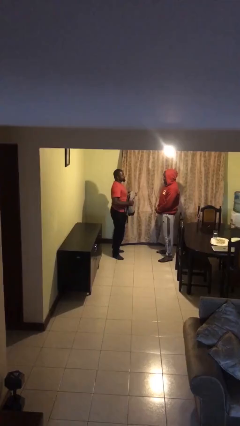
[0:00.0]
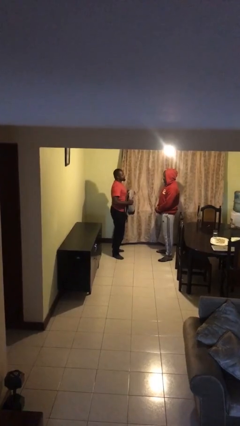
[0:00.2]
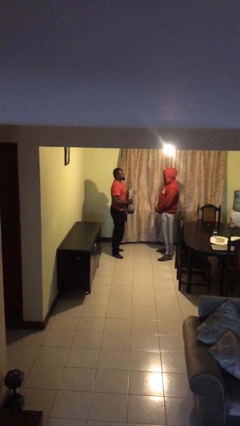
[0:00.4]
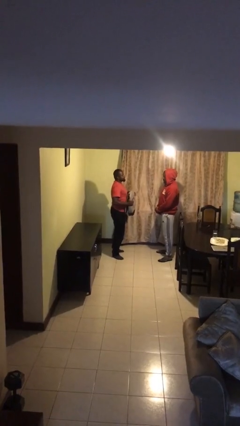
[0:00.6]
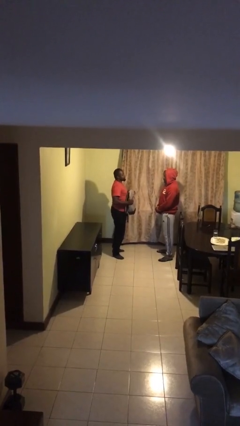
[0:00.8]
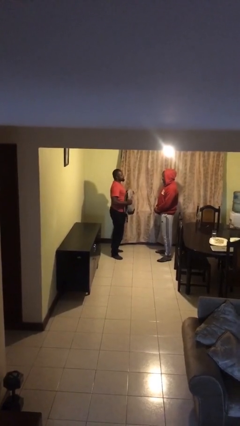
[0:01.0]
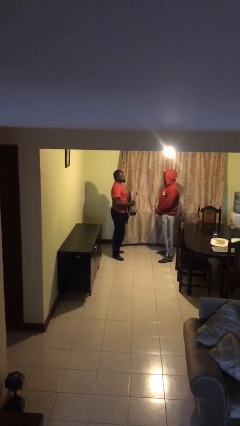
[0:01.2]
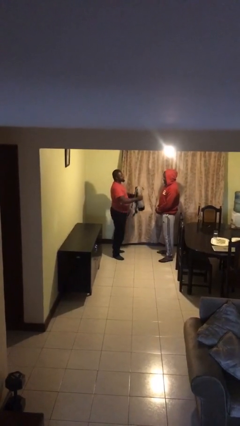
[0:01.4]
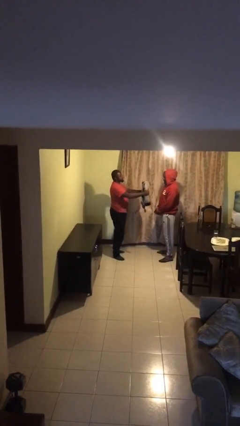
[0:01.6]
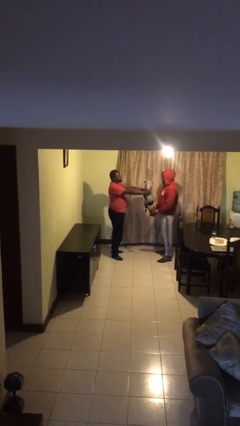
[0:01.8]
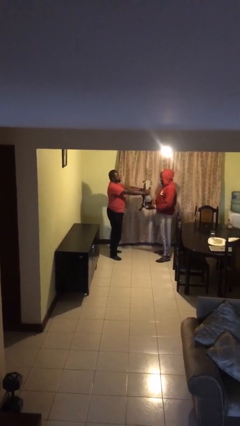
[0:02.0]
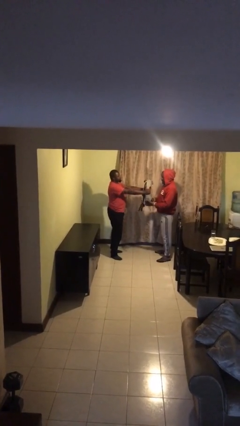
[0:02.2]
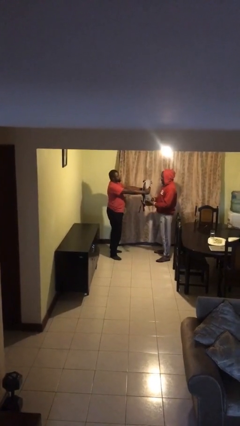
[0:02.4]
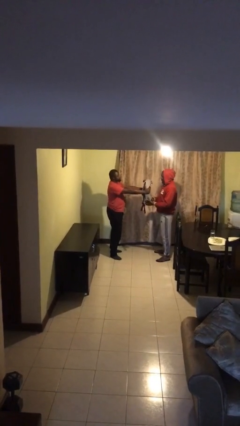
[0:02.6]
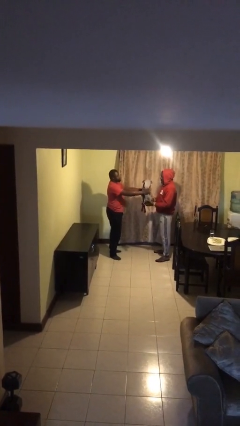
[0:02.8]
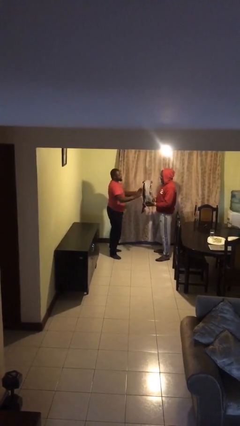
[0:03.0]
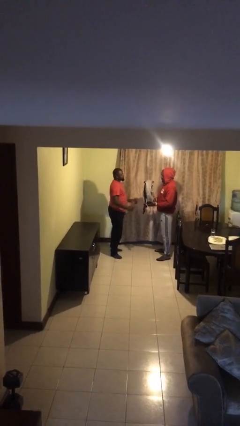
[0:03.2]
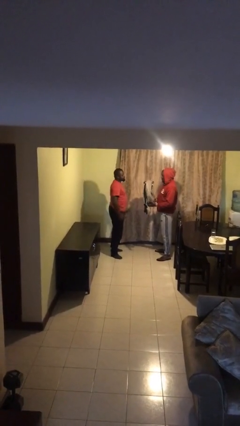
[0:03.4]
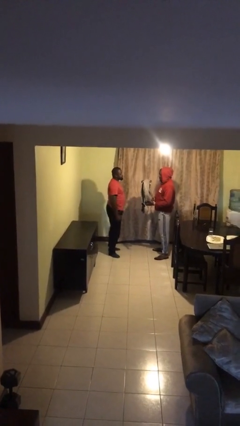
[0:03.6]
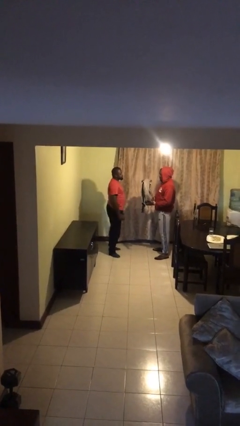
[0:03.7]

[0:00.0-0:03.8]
person transfers object to person

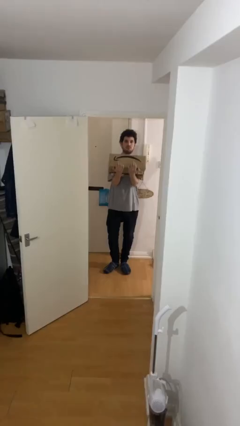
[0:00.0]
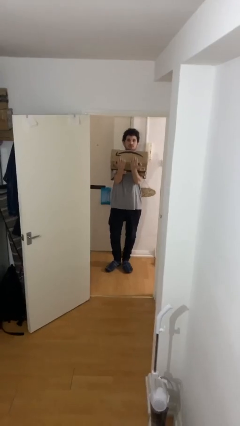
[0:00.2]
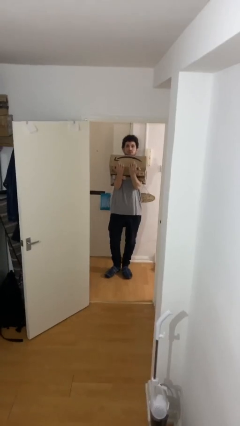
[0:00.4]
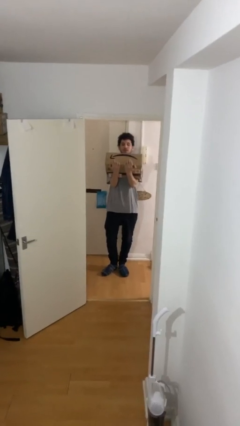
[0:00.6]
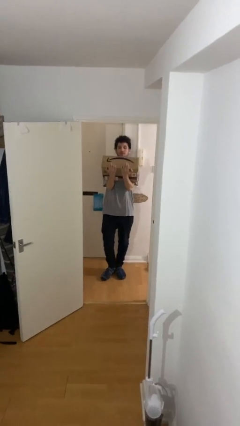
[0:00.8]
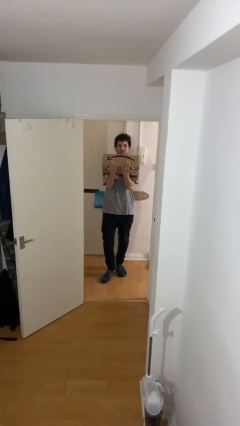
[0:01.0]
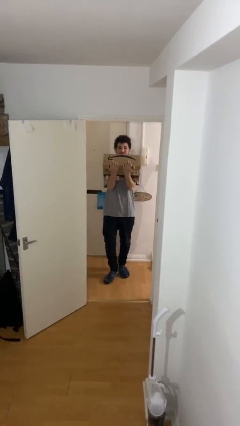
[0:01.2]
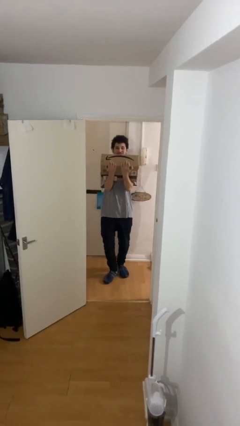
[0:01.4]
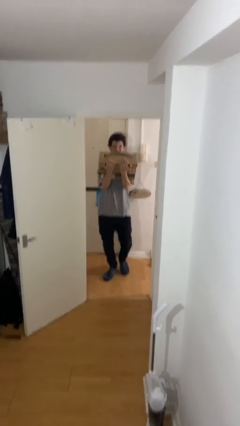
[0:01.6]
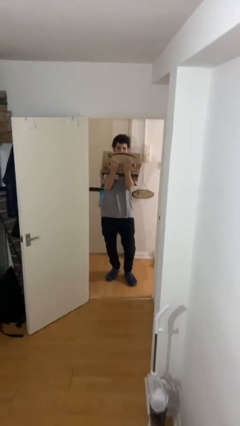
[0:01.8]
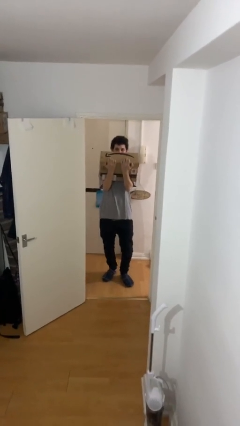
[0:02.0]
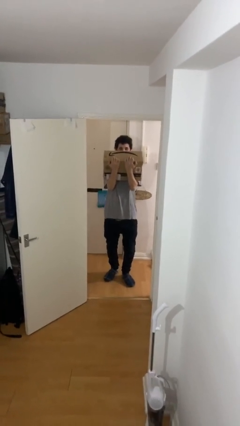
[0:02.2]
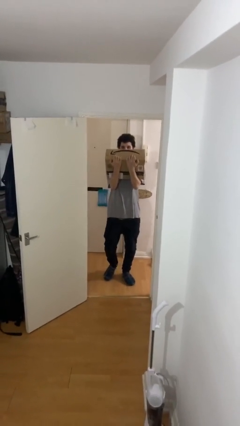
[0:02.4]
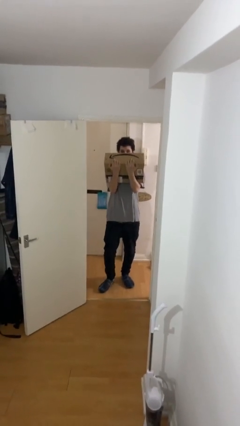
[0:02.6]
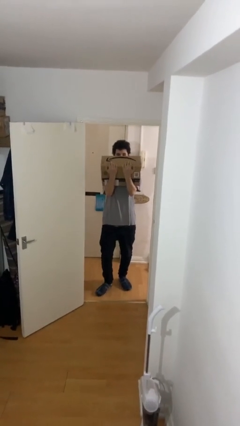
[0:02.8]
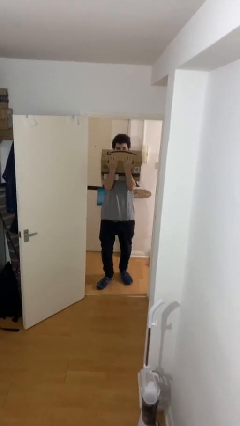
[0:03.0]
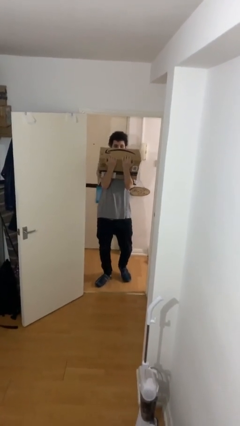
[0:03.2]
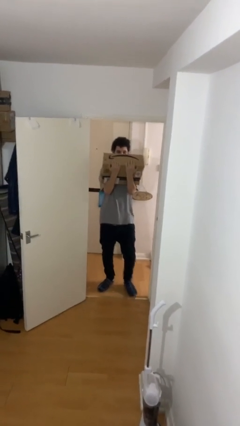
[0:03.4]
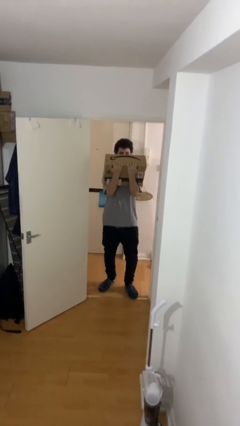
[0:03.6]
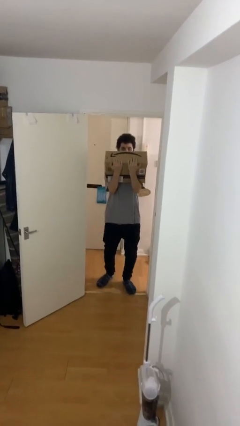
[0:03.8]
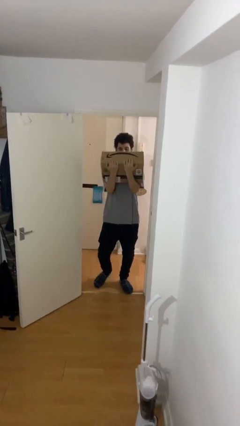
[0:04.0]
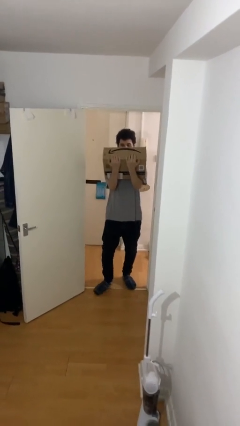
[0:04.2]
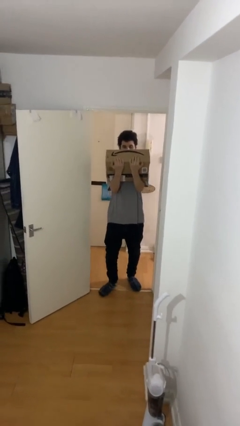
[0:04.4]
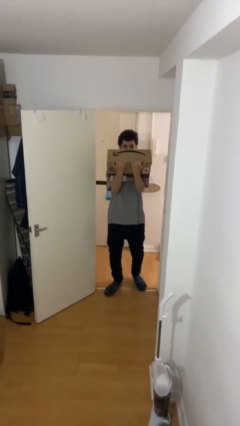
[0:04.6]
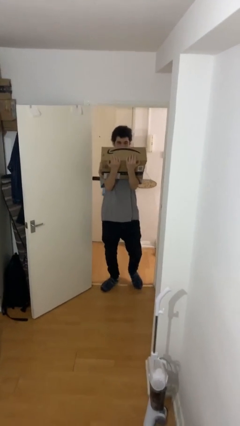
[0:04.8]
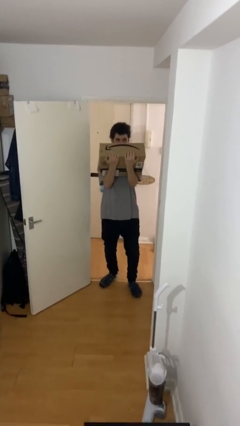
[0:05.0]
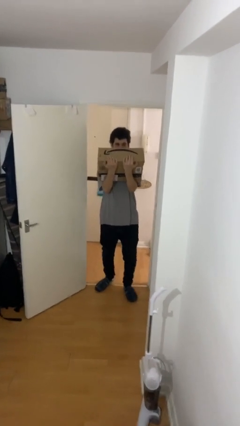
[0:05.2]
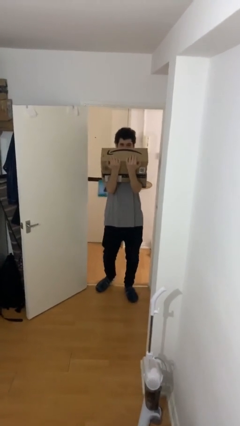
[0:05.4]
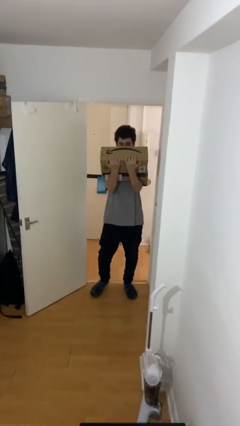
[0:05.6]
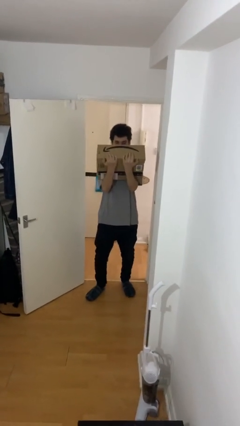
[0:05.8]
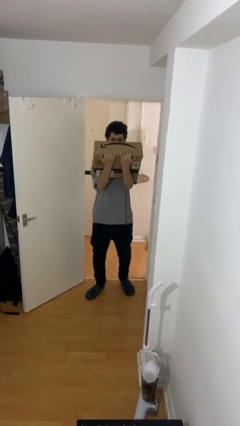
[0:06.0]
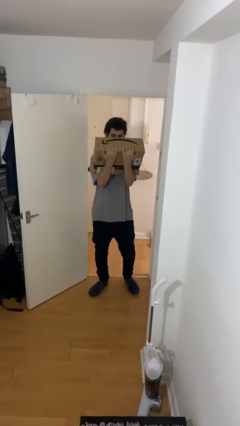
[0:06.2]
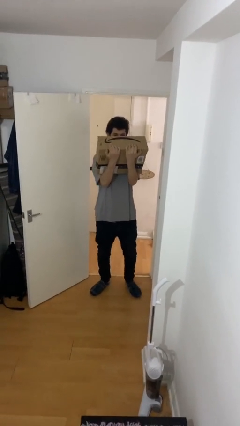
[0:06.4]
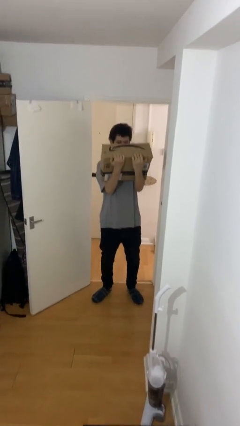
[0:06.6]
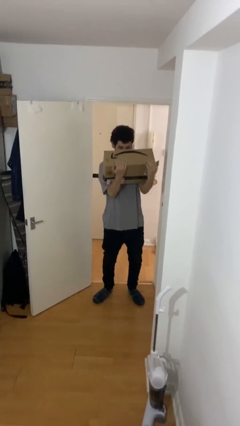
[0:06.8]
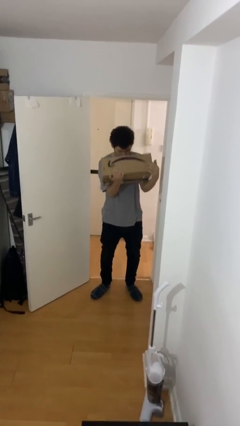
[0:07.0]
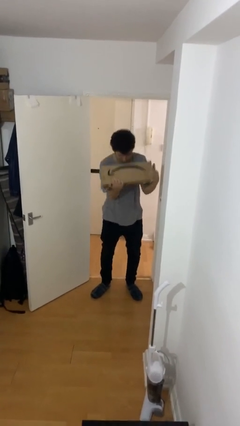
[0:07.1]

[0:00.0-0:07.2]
person carries heavy object

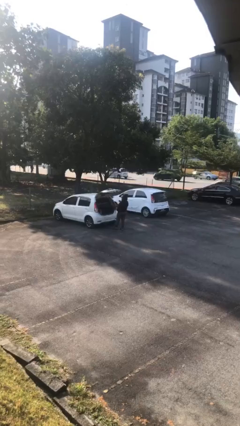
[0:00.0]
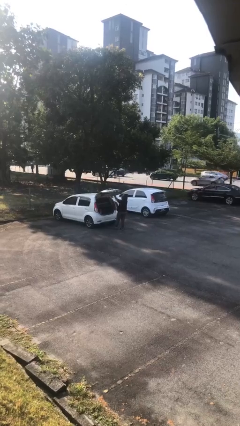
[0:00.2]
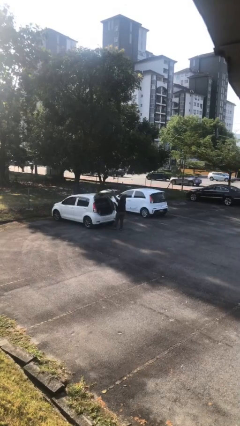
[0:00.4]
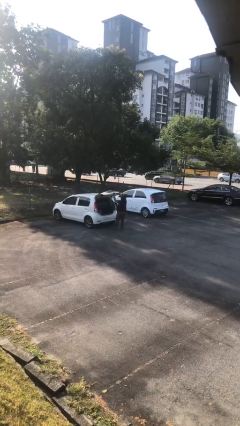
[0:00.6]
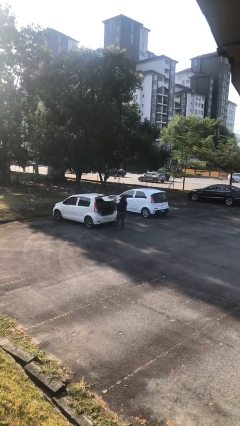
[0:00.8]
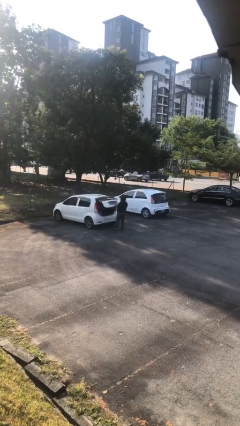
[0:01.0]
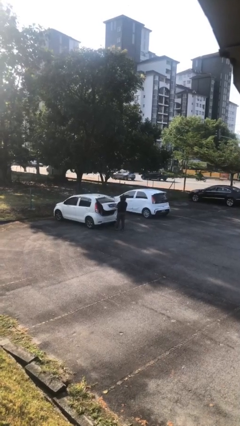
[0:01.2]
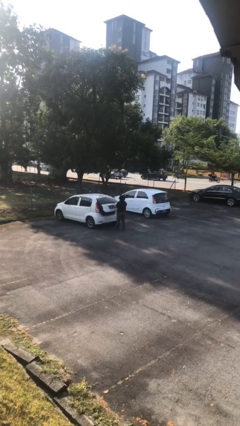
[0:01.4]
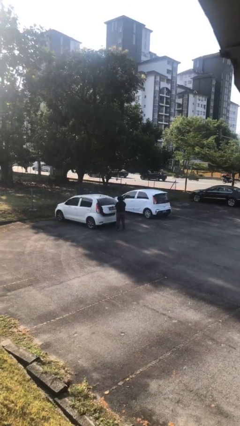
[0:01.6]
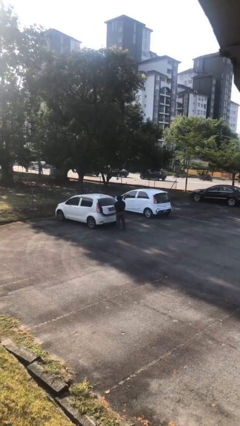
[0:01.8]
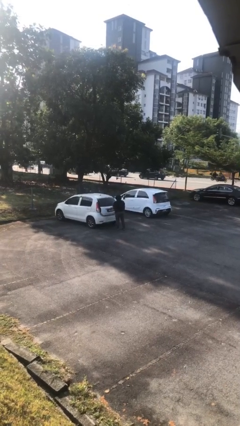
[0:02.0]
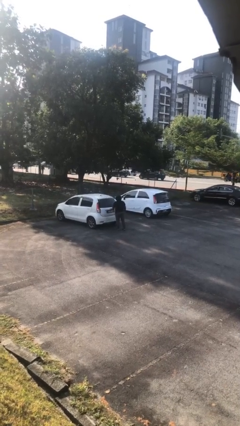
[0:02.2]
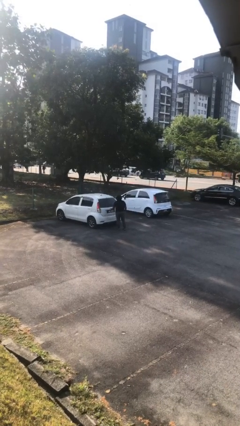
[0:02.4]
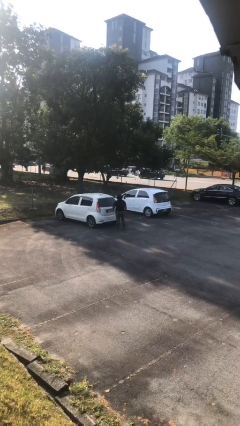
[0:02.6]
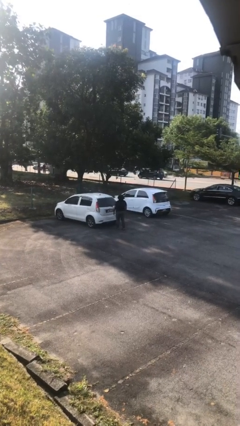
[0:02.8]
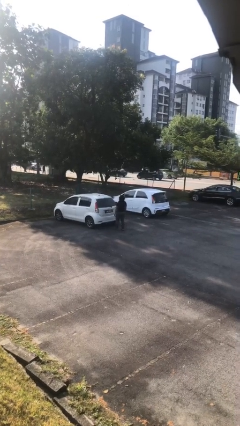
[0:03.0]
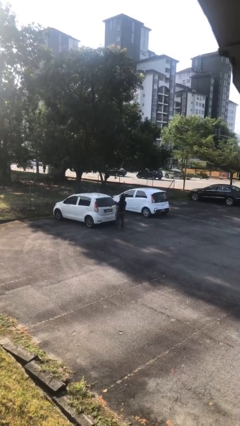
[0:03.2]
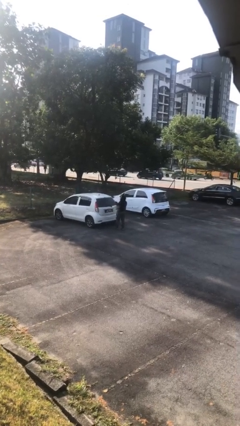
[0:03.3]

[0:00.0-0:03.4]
person closes car trunk

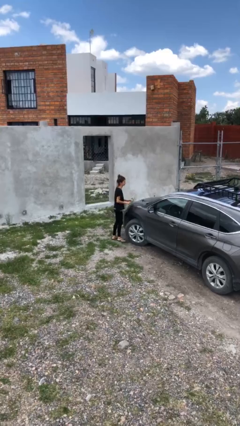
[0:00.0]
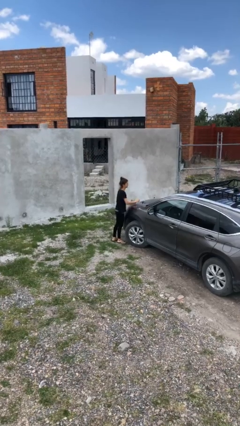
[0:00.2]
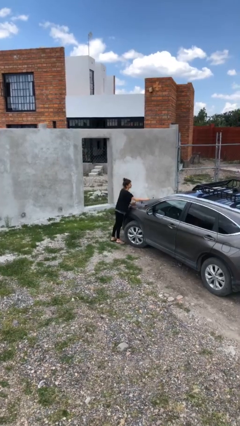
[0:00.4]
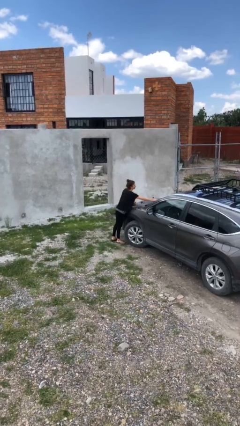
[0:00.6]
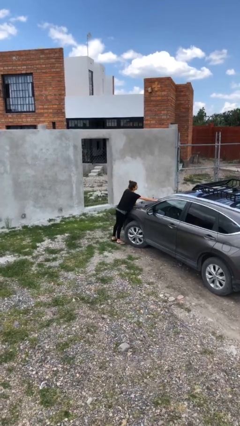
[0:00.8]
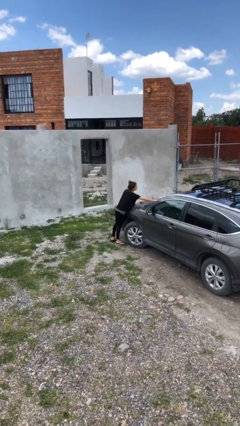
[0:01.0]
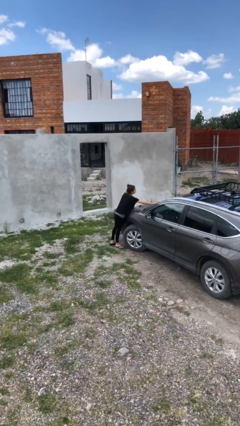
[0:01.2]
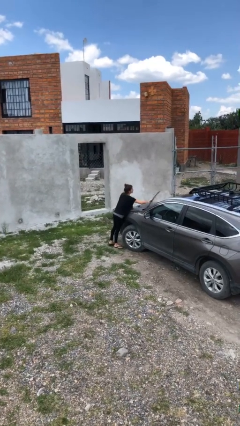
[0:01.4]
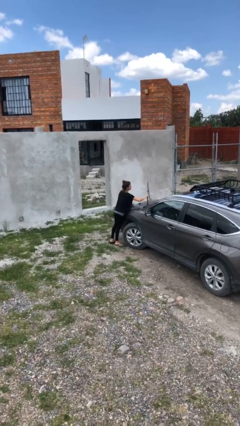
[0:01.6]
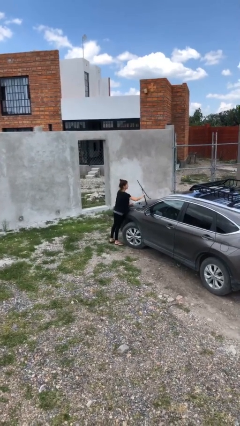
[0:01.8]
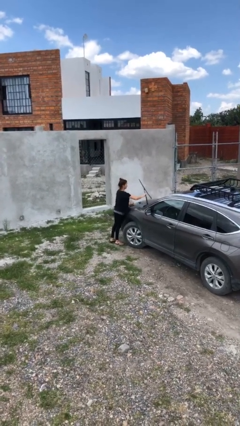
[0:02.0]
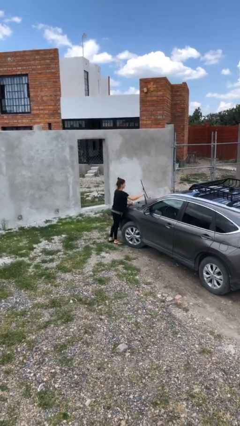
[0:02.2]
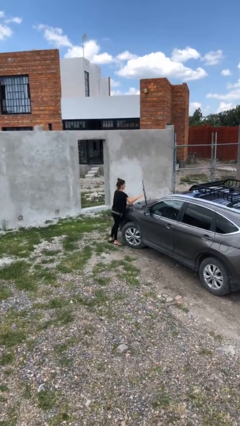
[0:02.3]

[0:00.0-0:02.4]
person flips up car wipers

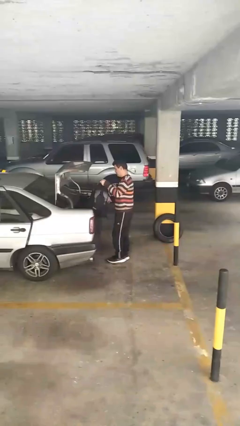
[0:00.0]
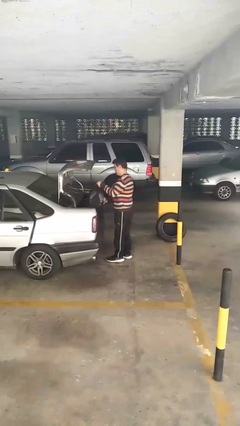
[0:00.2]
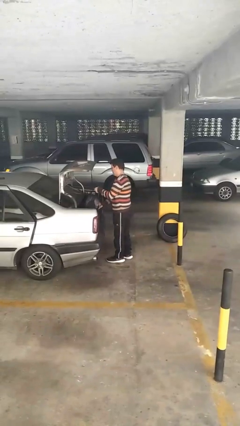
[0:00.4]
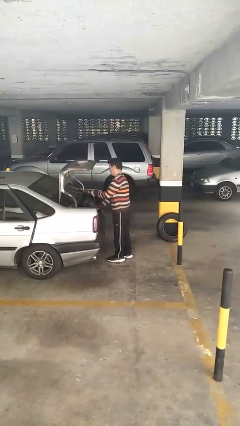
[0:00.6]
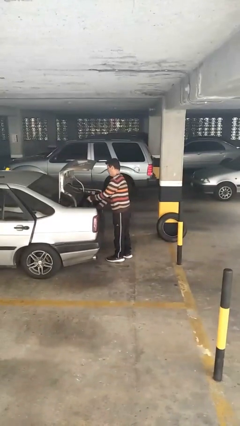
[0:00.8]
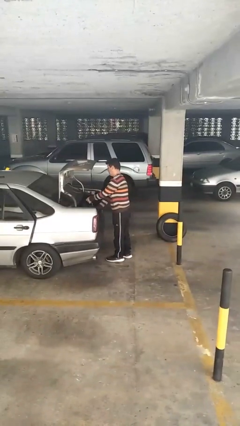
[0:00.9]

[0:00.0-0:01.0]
person loads car

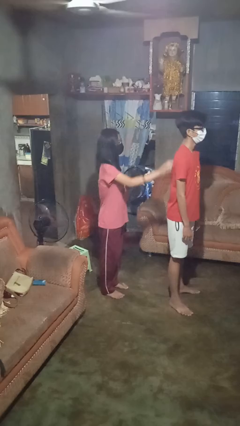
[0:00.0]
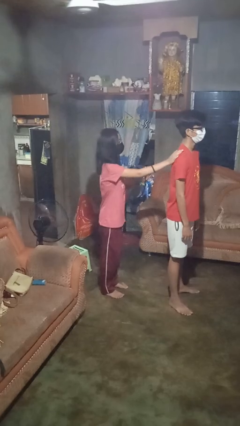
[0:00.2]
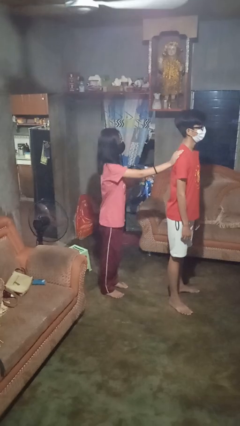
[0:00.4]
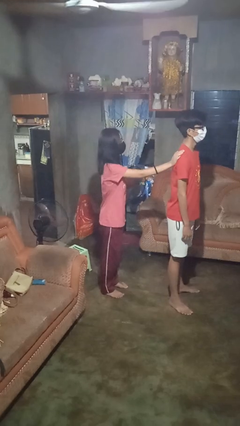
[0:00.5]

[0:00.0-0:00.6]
person touches back of person
